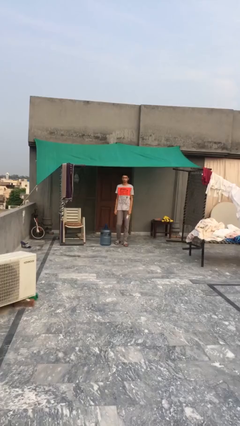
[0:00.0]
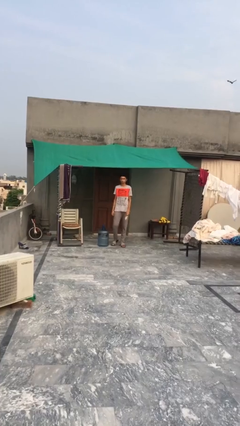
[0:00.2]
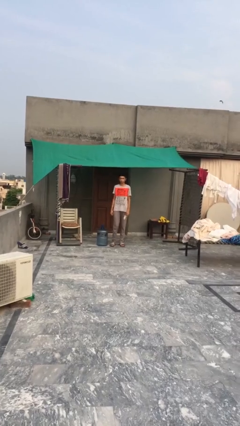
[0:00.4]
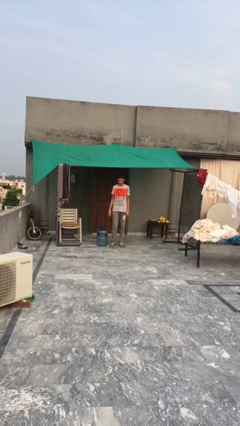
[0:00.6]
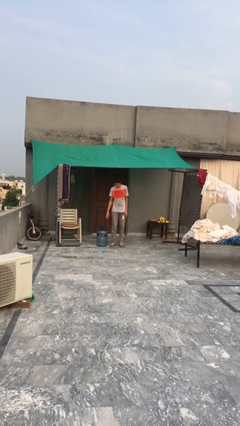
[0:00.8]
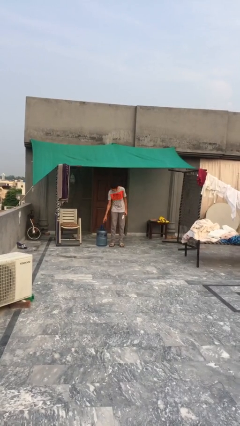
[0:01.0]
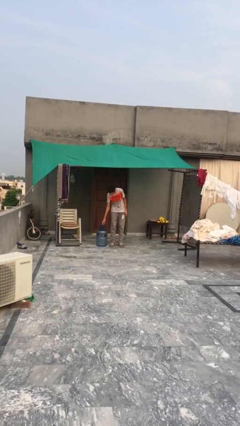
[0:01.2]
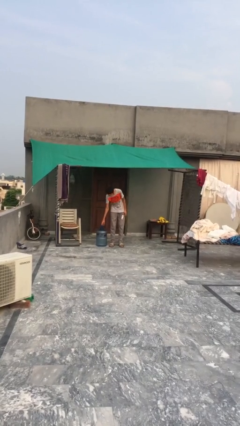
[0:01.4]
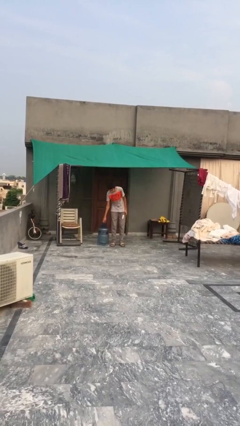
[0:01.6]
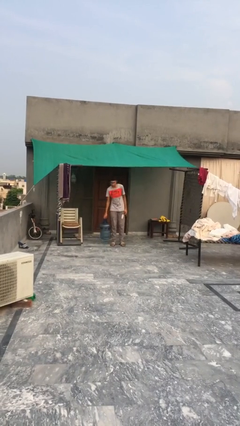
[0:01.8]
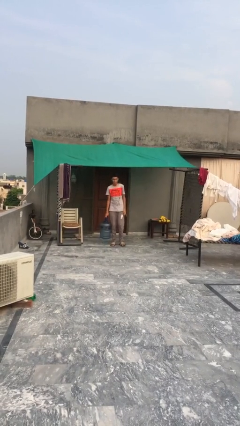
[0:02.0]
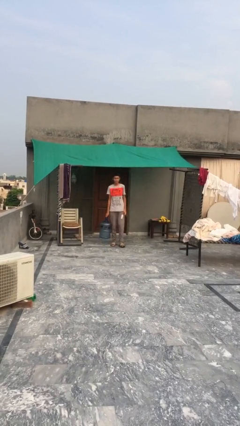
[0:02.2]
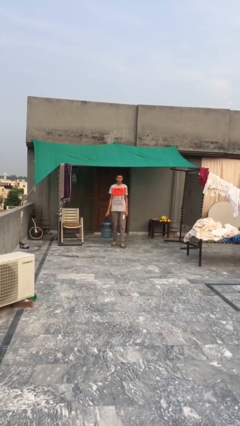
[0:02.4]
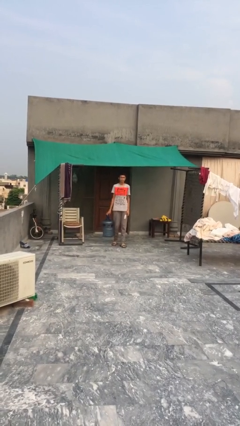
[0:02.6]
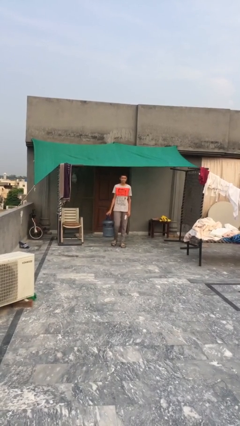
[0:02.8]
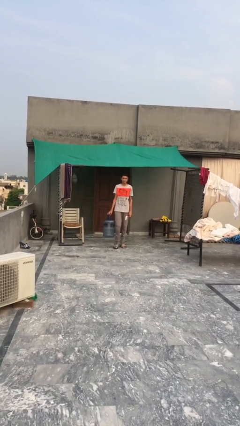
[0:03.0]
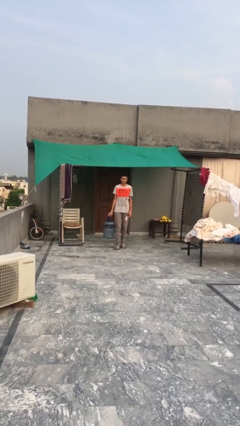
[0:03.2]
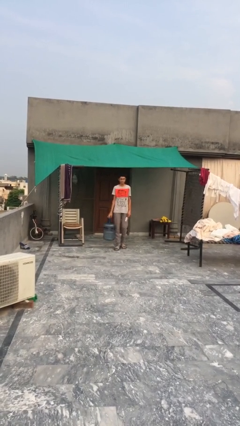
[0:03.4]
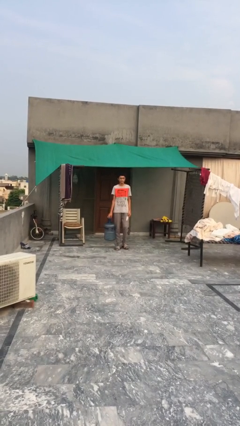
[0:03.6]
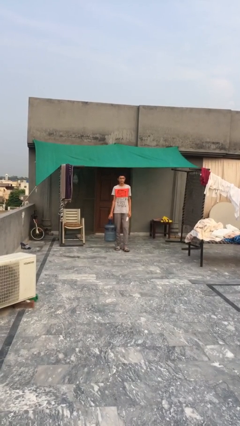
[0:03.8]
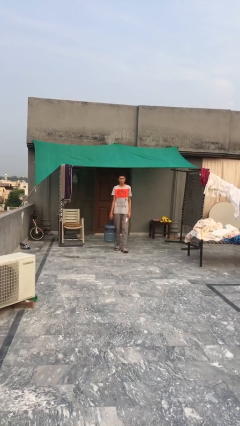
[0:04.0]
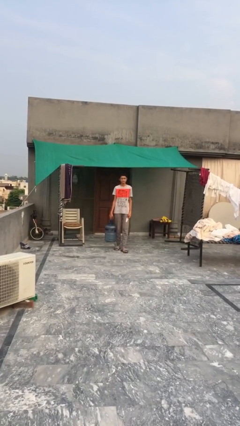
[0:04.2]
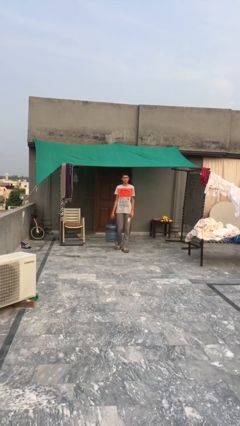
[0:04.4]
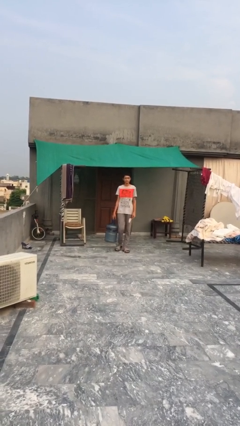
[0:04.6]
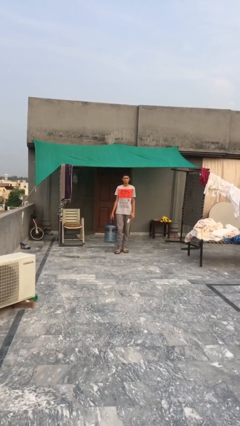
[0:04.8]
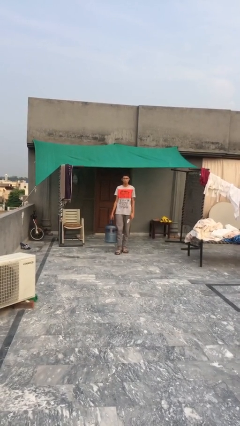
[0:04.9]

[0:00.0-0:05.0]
person carries heavy object

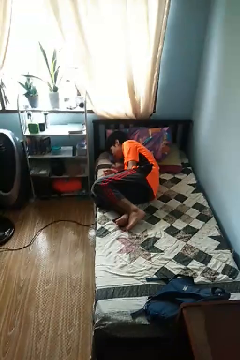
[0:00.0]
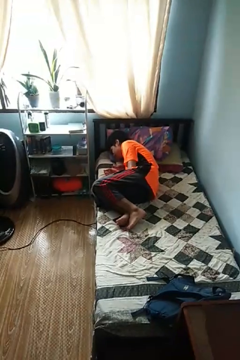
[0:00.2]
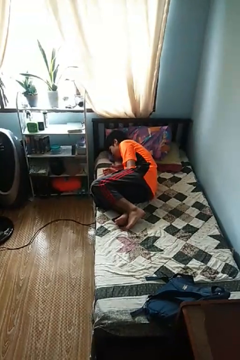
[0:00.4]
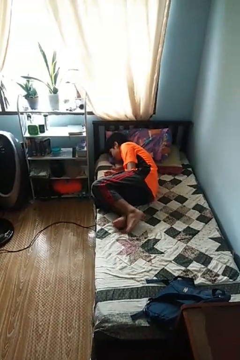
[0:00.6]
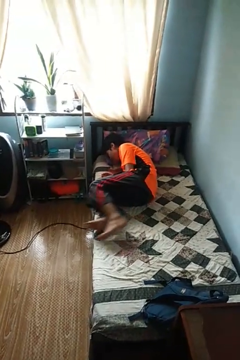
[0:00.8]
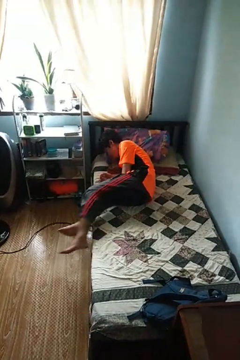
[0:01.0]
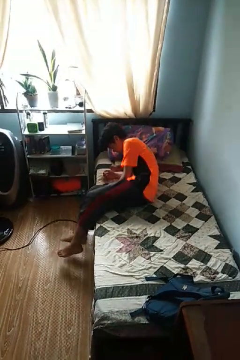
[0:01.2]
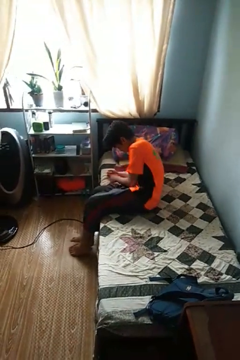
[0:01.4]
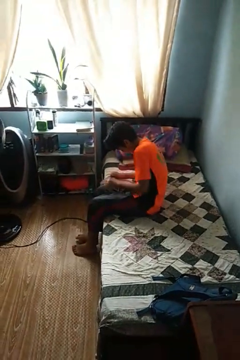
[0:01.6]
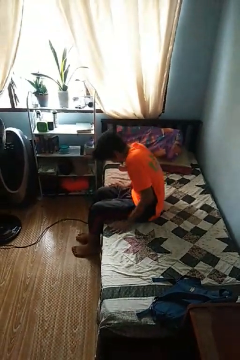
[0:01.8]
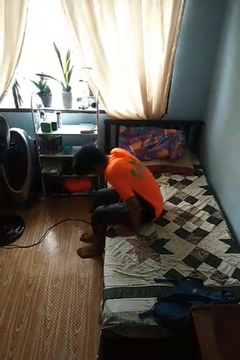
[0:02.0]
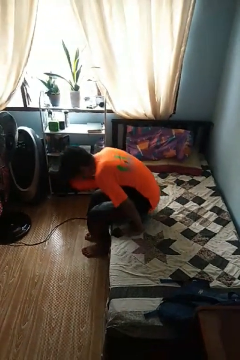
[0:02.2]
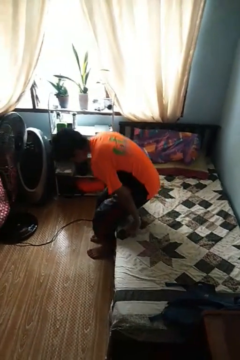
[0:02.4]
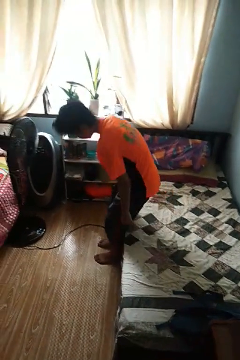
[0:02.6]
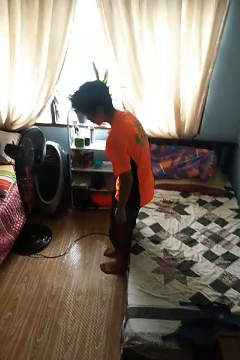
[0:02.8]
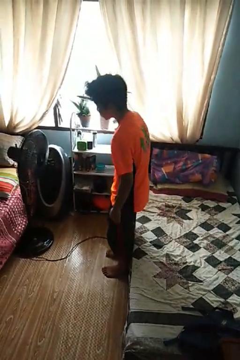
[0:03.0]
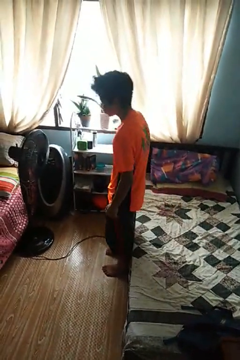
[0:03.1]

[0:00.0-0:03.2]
person stands up

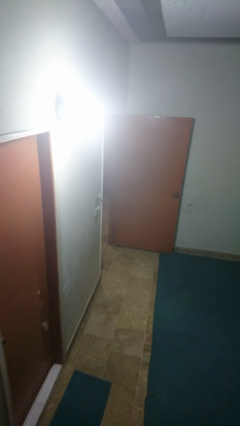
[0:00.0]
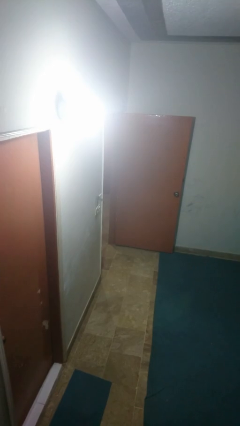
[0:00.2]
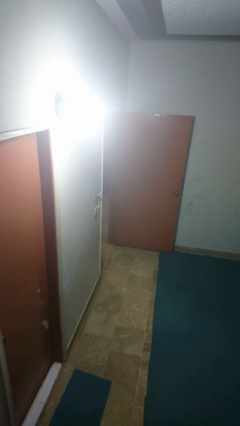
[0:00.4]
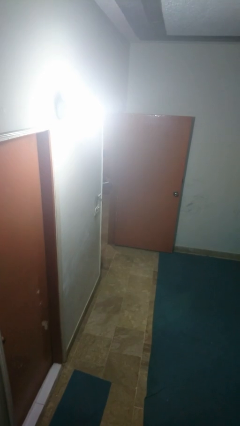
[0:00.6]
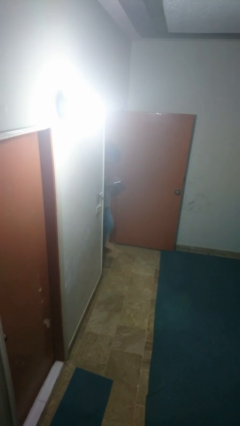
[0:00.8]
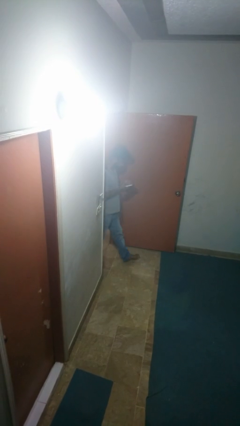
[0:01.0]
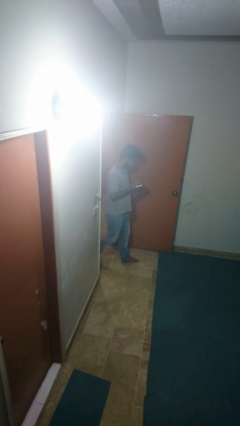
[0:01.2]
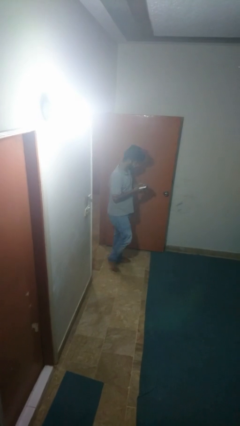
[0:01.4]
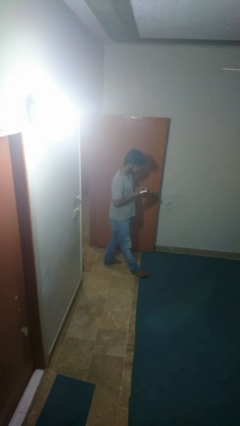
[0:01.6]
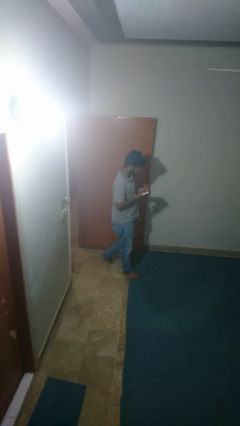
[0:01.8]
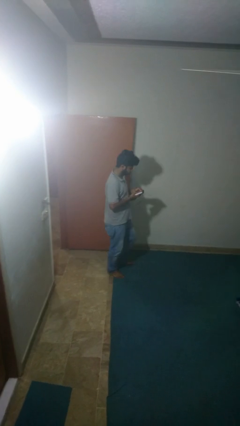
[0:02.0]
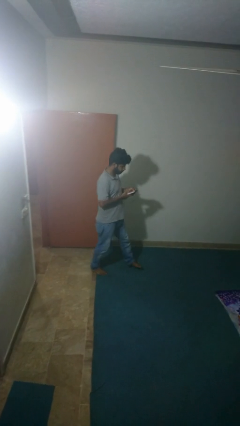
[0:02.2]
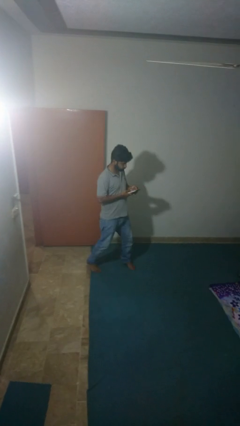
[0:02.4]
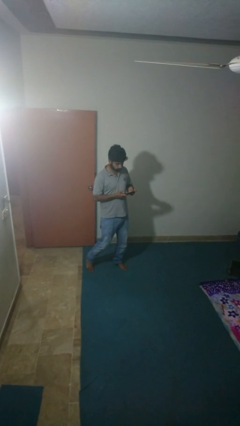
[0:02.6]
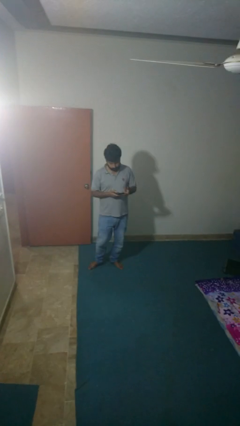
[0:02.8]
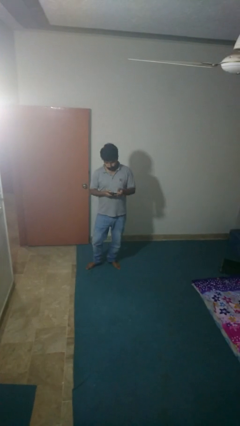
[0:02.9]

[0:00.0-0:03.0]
person enters scene through structure

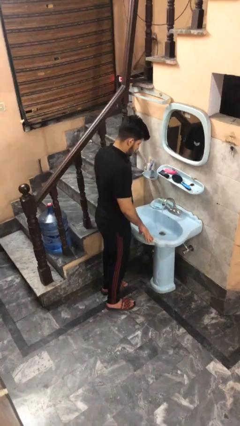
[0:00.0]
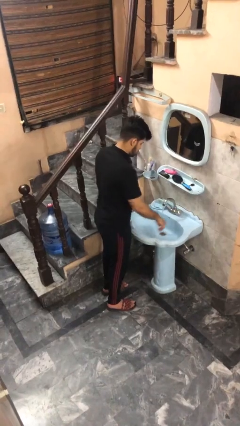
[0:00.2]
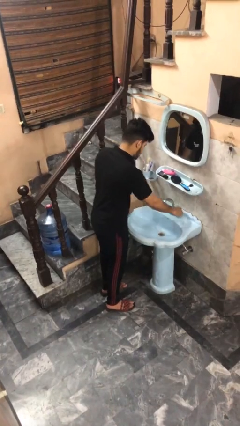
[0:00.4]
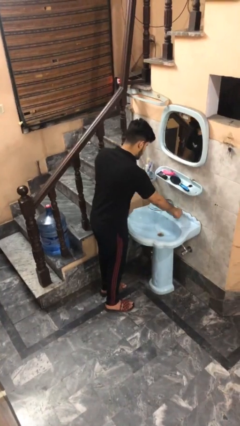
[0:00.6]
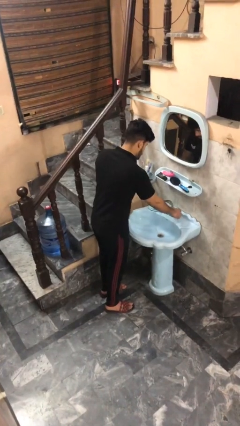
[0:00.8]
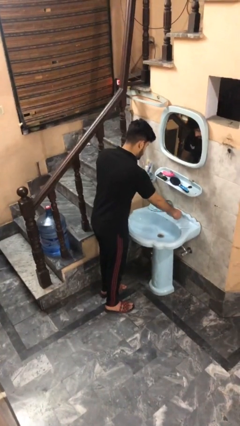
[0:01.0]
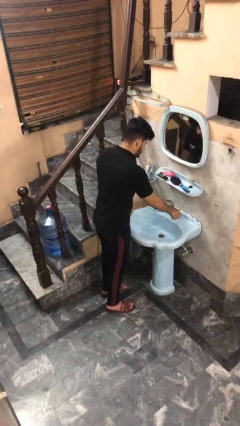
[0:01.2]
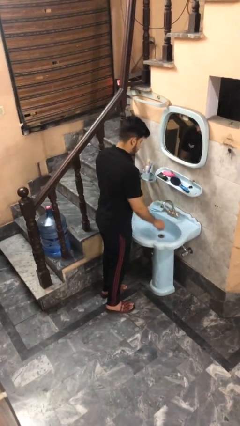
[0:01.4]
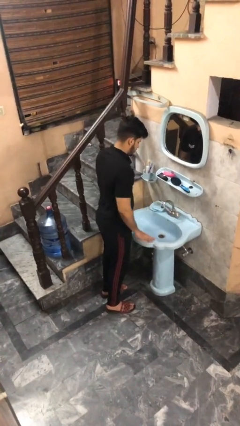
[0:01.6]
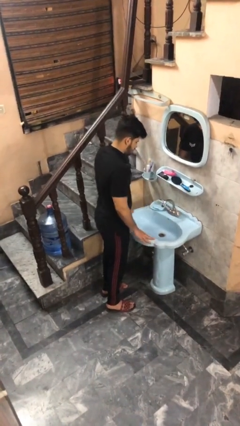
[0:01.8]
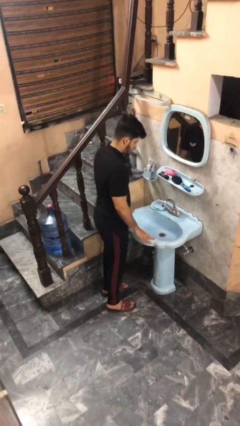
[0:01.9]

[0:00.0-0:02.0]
person turns off faucet

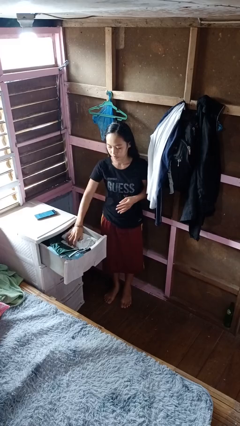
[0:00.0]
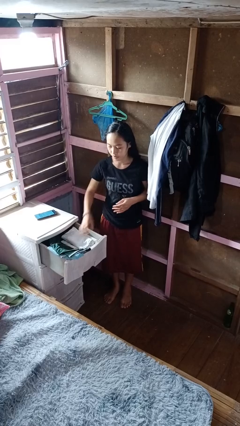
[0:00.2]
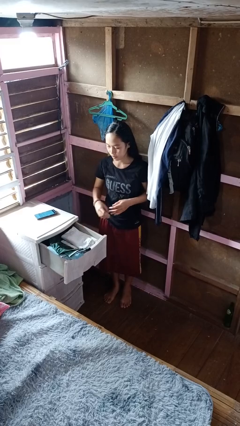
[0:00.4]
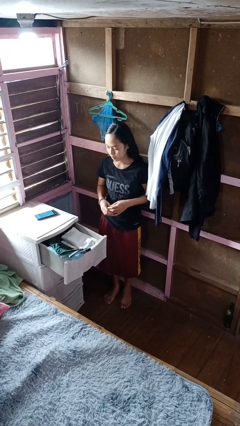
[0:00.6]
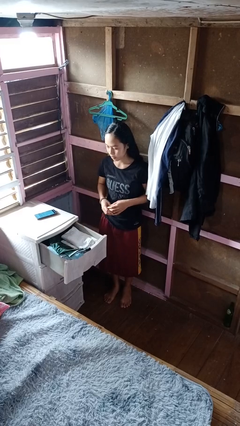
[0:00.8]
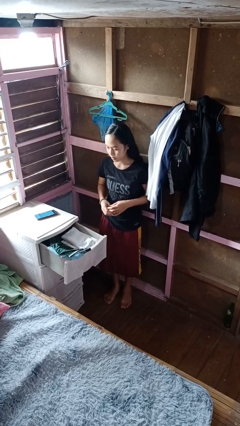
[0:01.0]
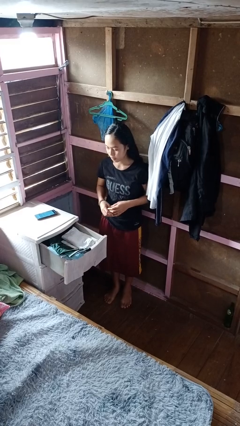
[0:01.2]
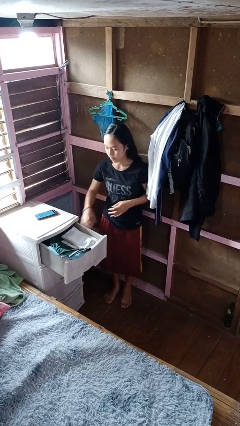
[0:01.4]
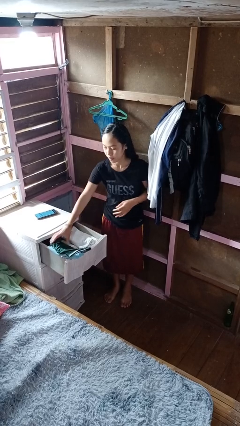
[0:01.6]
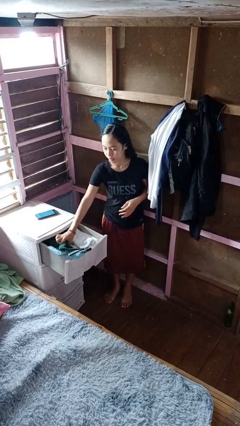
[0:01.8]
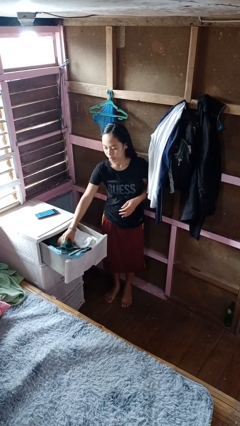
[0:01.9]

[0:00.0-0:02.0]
person puts clothes into dresser

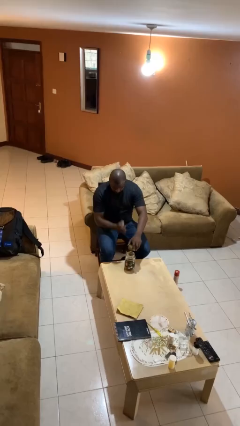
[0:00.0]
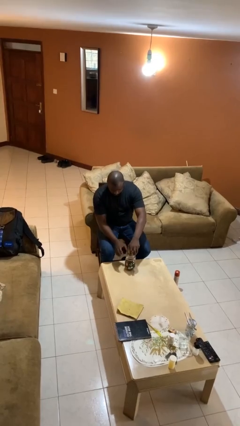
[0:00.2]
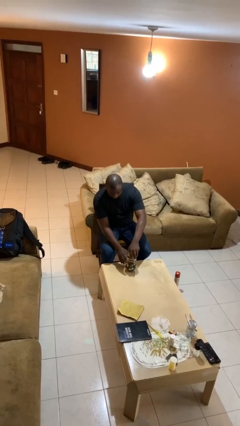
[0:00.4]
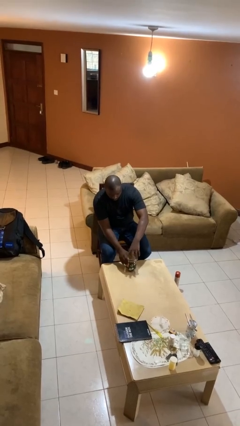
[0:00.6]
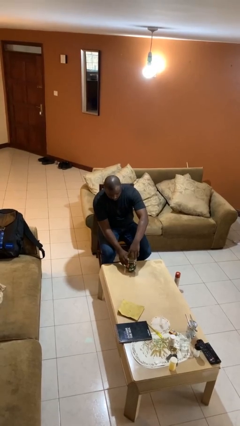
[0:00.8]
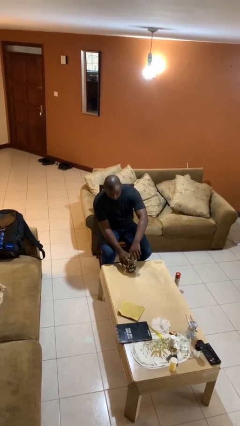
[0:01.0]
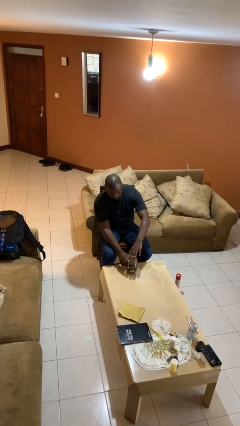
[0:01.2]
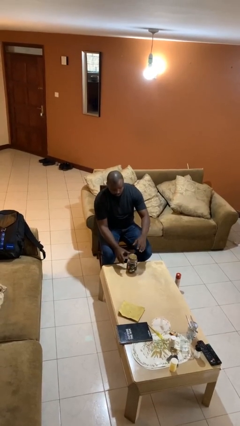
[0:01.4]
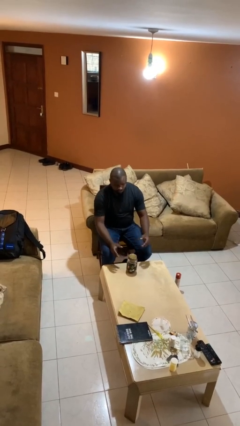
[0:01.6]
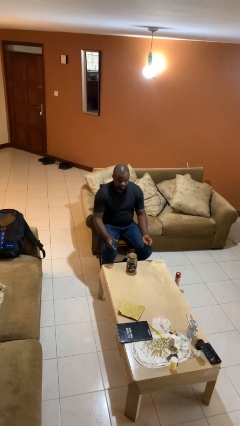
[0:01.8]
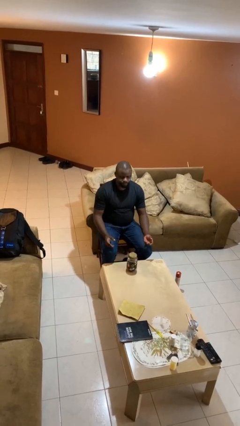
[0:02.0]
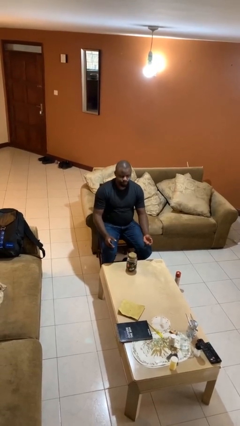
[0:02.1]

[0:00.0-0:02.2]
person closes jar

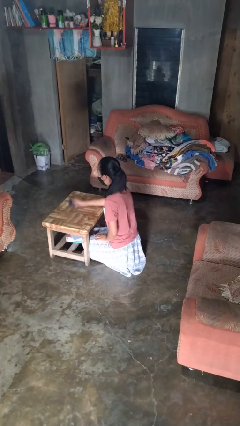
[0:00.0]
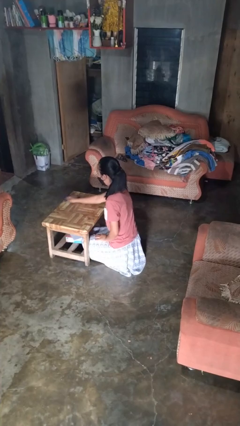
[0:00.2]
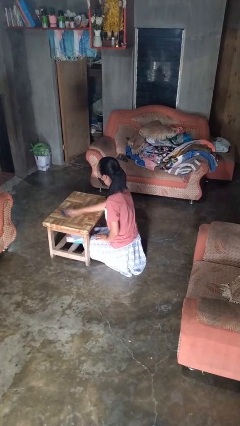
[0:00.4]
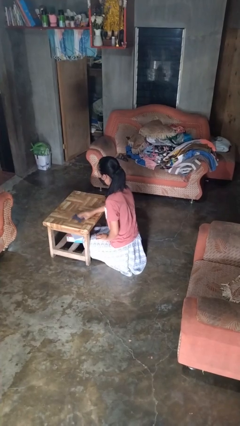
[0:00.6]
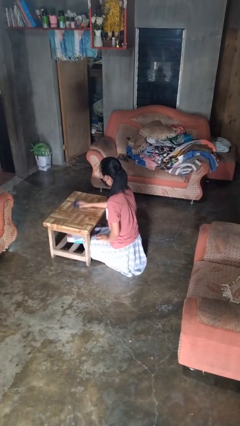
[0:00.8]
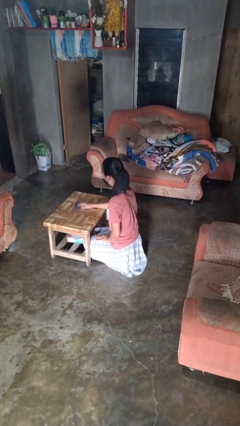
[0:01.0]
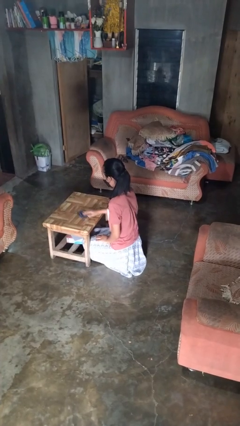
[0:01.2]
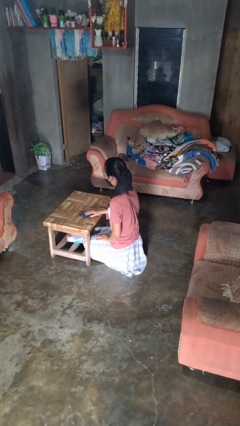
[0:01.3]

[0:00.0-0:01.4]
person cleans table with rag
